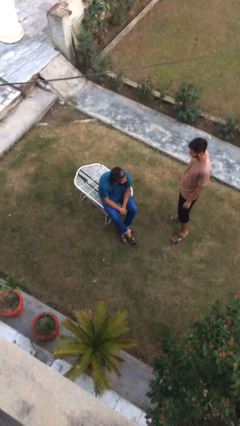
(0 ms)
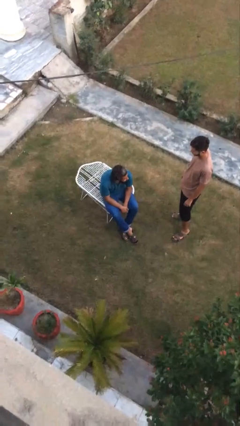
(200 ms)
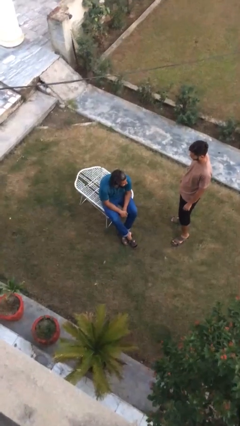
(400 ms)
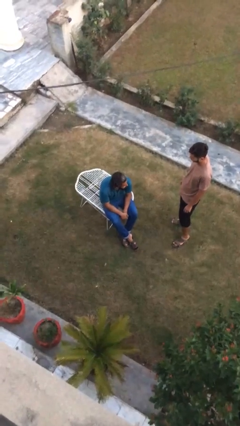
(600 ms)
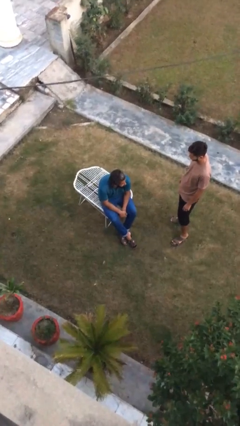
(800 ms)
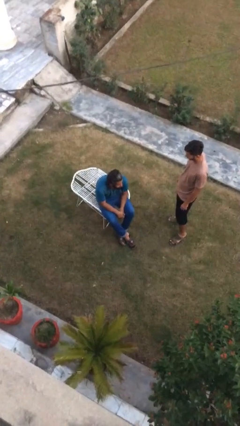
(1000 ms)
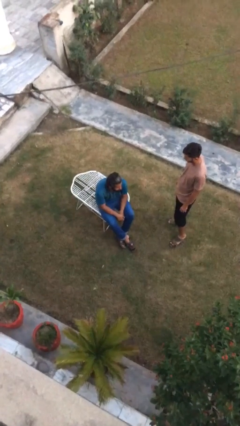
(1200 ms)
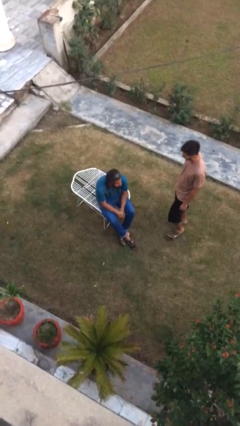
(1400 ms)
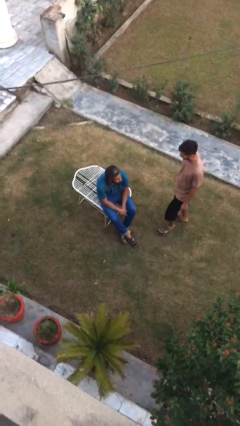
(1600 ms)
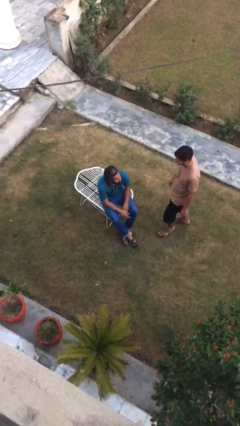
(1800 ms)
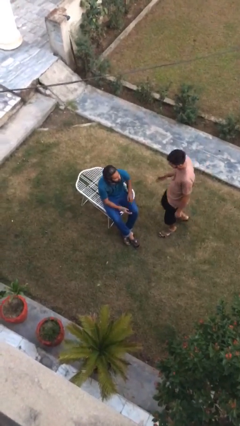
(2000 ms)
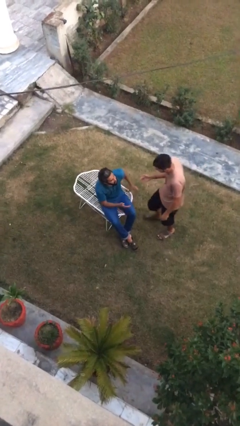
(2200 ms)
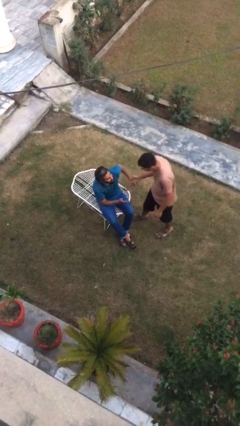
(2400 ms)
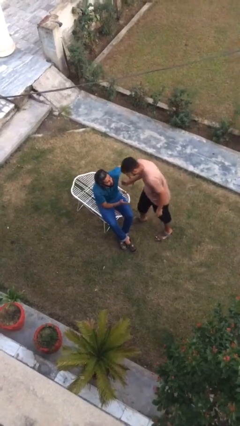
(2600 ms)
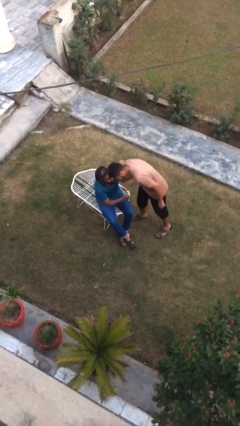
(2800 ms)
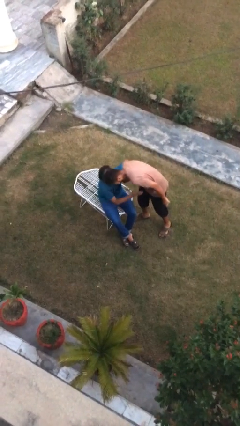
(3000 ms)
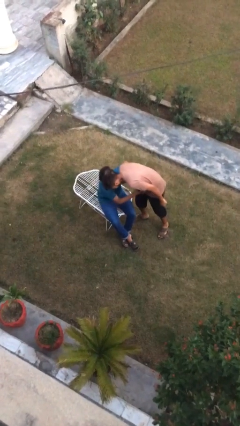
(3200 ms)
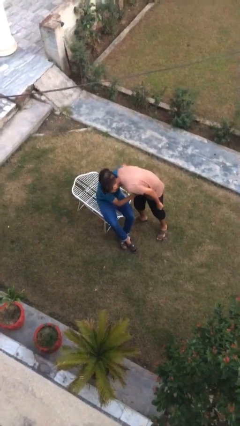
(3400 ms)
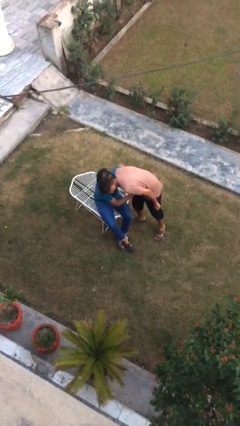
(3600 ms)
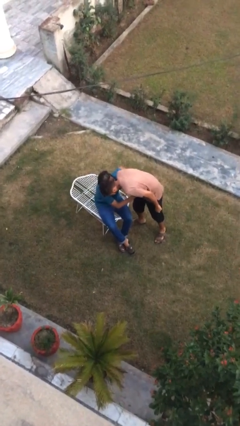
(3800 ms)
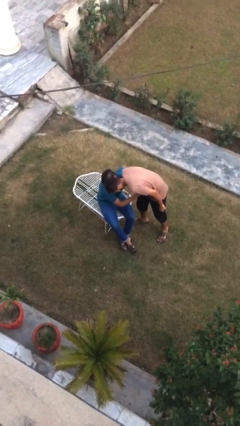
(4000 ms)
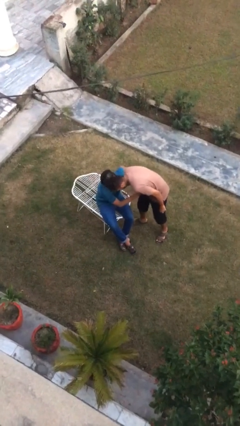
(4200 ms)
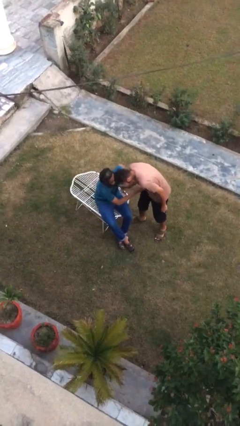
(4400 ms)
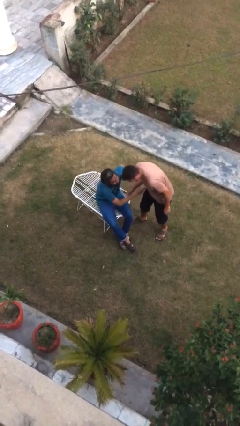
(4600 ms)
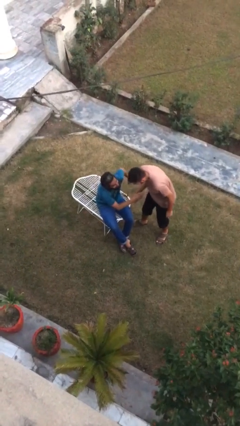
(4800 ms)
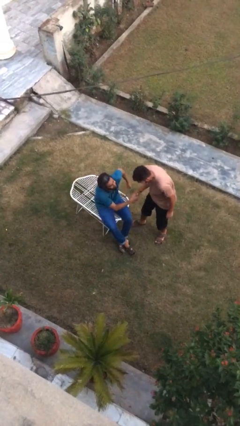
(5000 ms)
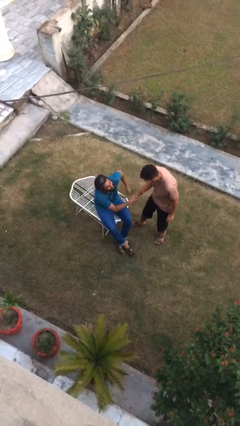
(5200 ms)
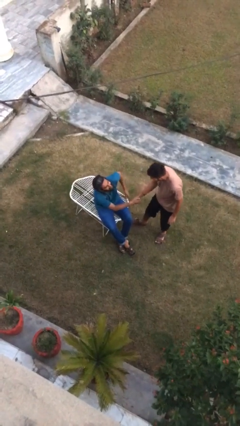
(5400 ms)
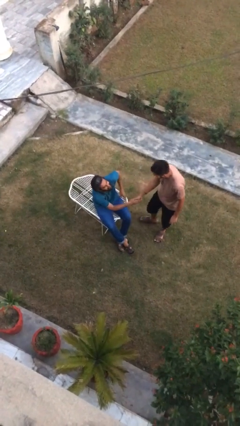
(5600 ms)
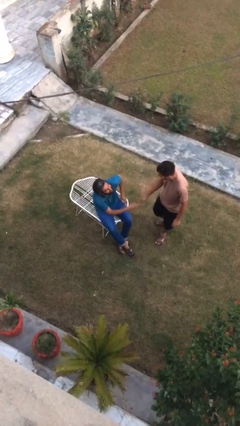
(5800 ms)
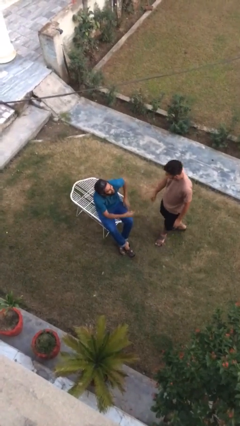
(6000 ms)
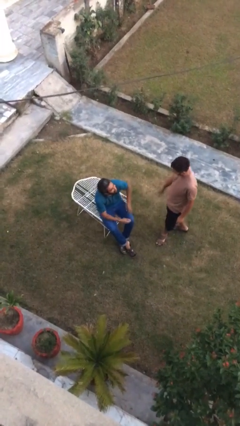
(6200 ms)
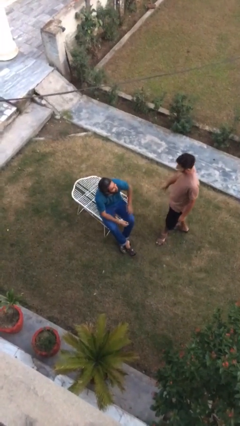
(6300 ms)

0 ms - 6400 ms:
person embraces person

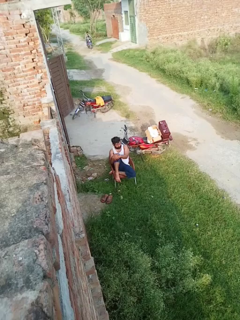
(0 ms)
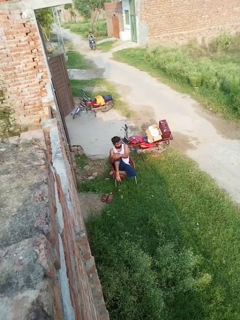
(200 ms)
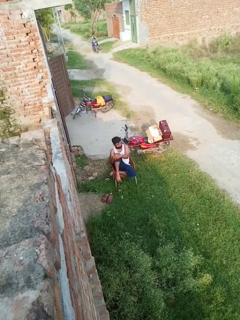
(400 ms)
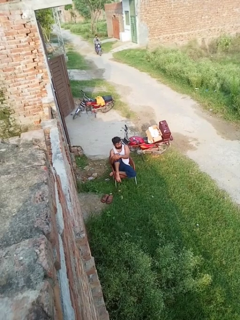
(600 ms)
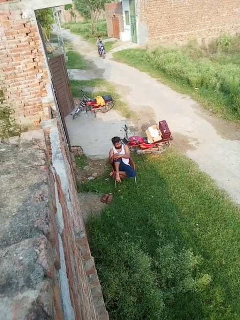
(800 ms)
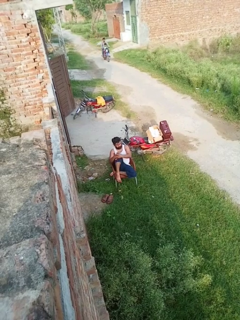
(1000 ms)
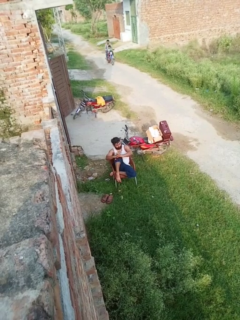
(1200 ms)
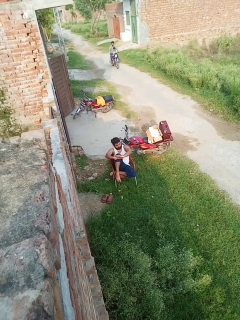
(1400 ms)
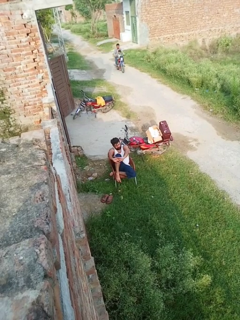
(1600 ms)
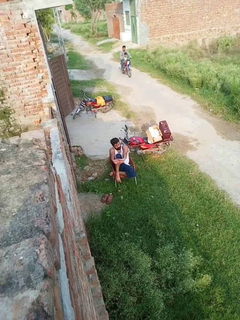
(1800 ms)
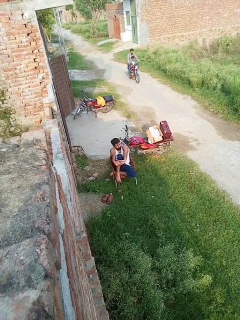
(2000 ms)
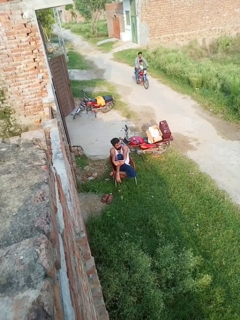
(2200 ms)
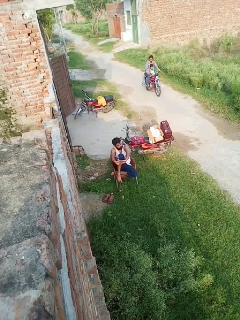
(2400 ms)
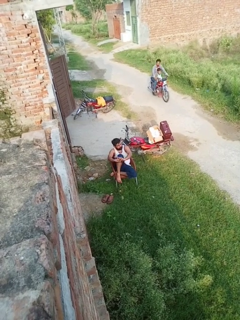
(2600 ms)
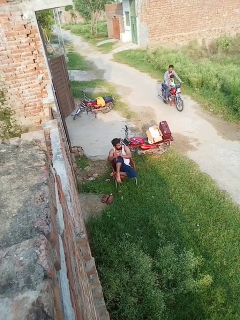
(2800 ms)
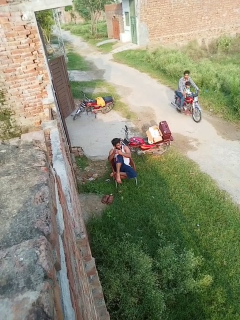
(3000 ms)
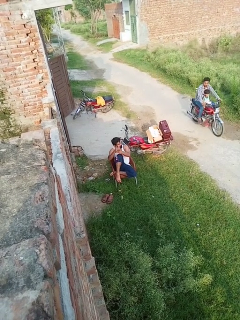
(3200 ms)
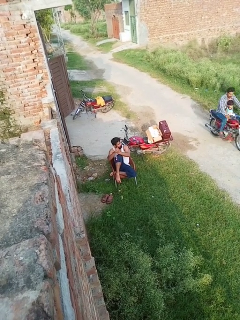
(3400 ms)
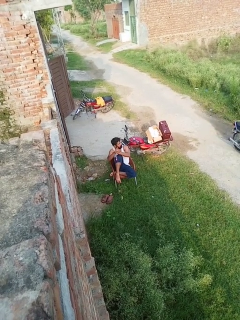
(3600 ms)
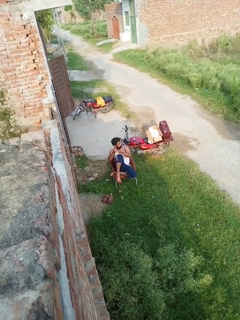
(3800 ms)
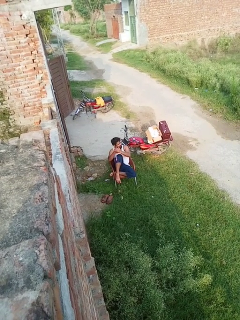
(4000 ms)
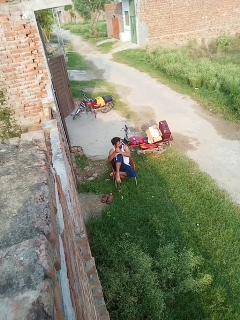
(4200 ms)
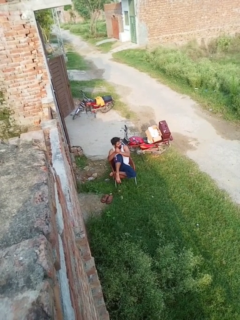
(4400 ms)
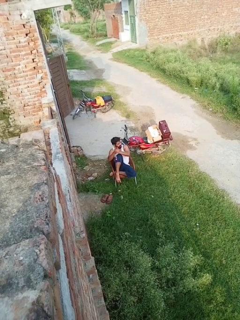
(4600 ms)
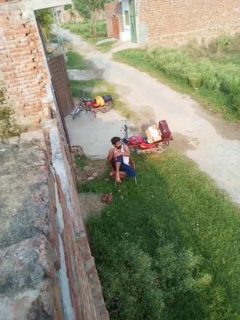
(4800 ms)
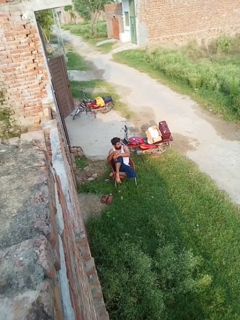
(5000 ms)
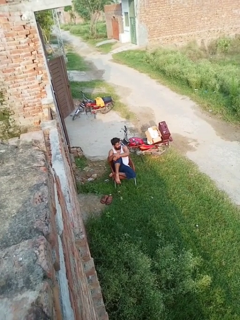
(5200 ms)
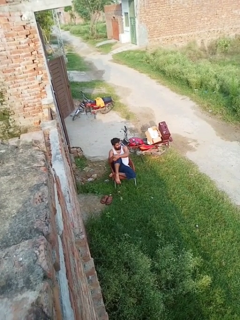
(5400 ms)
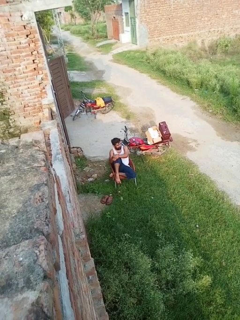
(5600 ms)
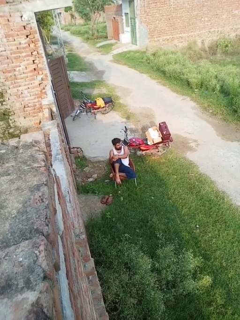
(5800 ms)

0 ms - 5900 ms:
person cracks knuckles

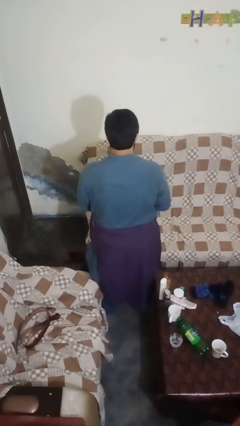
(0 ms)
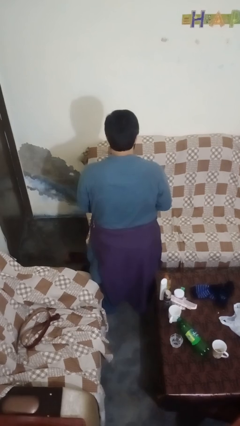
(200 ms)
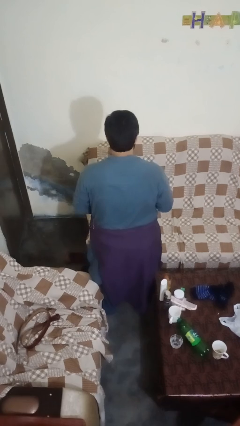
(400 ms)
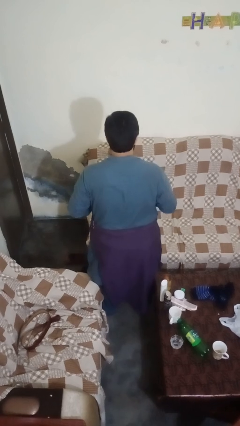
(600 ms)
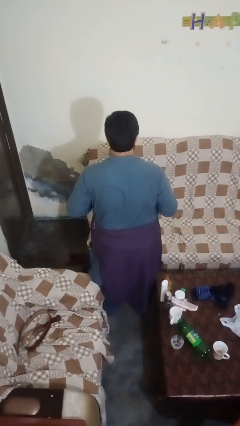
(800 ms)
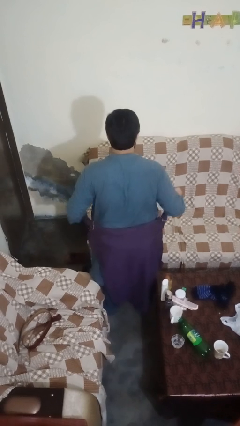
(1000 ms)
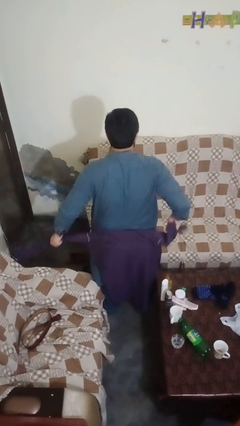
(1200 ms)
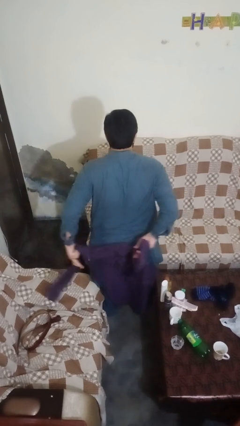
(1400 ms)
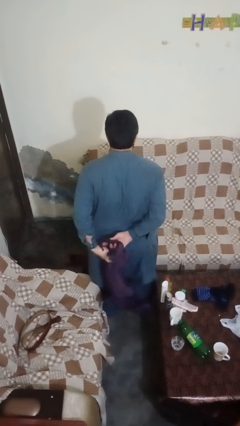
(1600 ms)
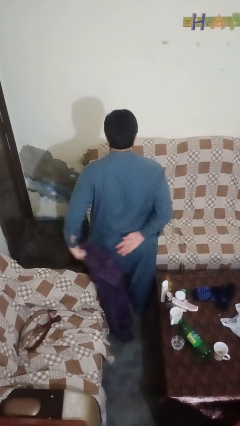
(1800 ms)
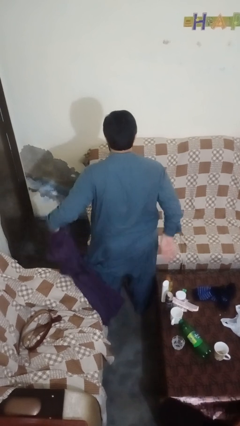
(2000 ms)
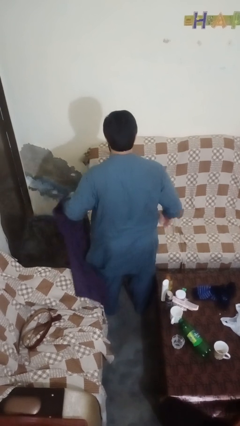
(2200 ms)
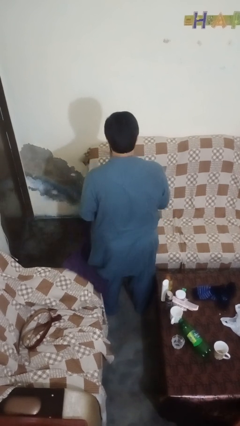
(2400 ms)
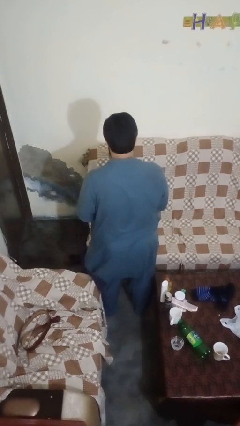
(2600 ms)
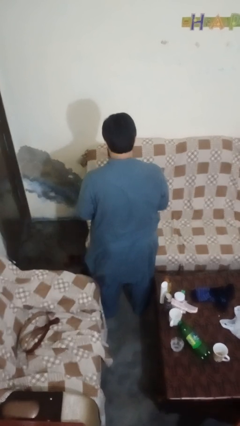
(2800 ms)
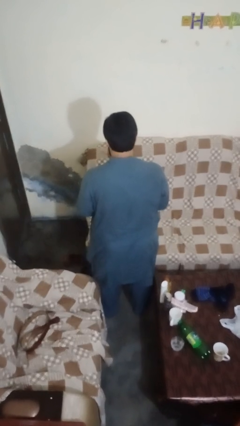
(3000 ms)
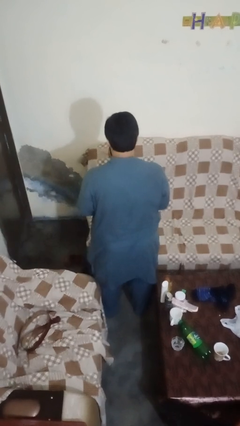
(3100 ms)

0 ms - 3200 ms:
person unties jacket around waist

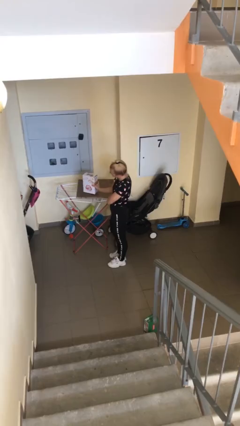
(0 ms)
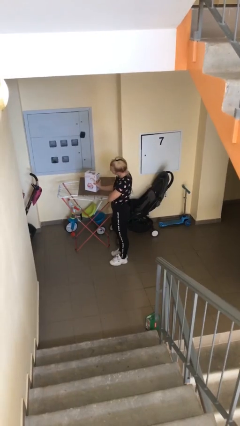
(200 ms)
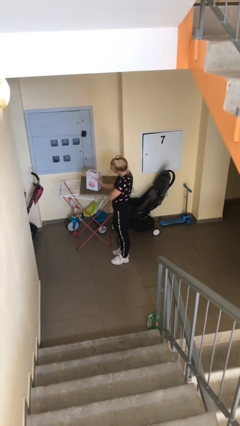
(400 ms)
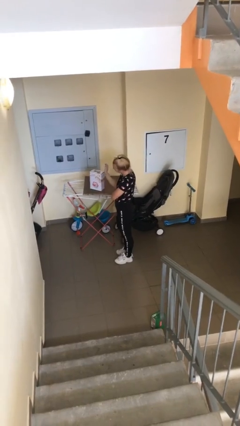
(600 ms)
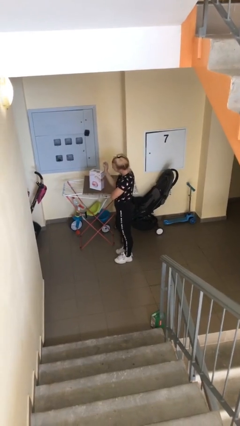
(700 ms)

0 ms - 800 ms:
person puts down object on table

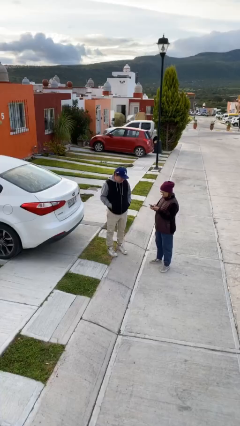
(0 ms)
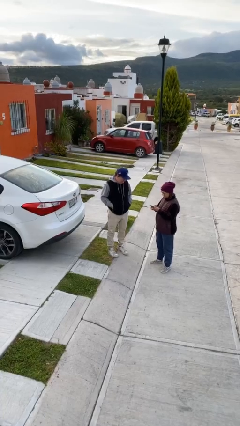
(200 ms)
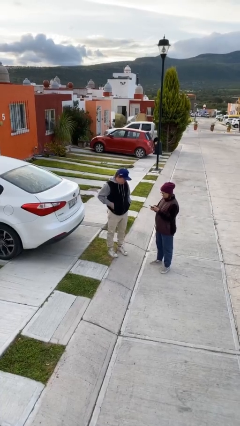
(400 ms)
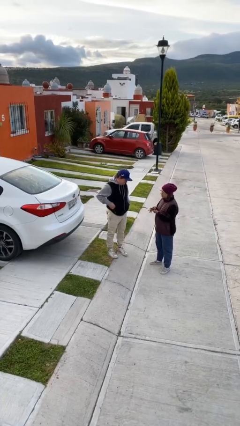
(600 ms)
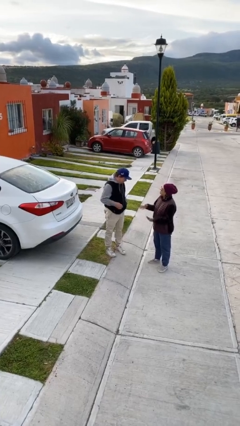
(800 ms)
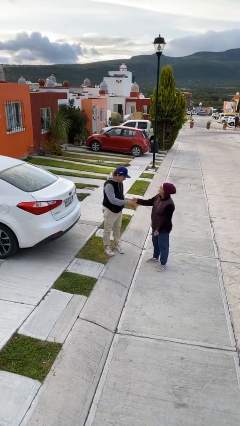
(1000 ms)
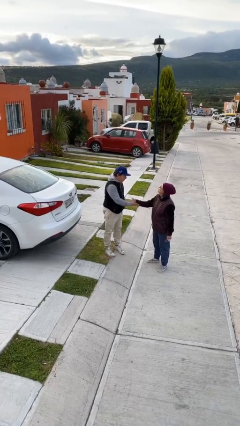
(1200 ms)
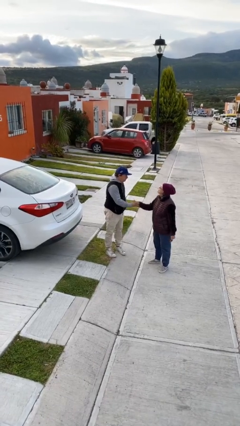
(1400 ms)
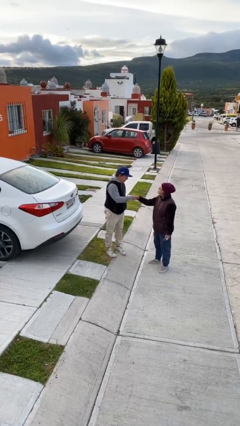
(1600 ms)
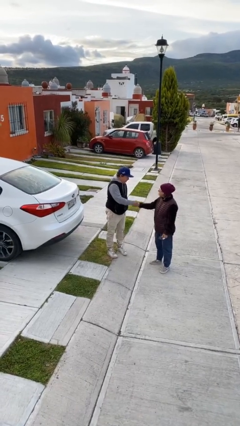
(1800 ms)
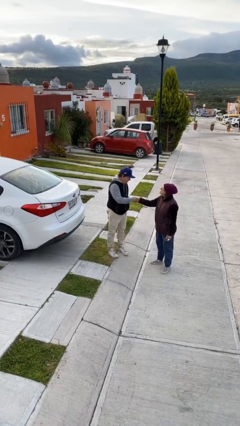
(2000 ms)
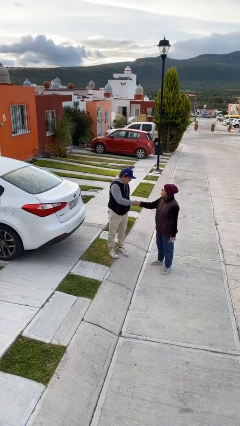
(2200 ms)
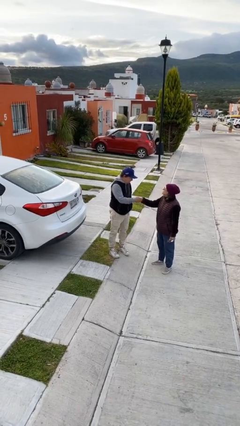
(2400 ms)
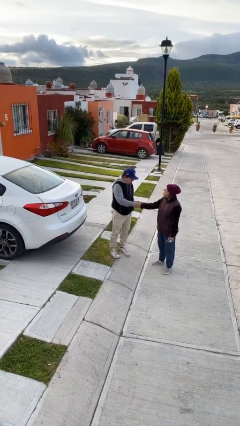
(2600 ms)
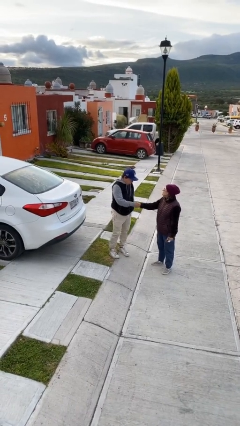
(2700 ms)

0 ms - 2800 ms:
person shakes hand

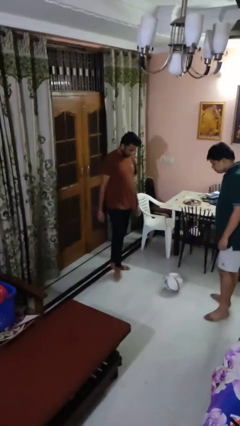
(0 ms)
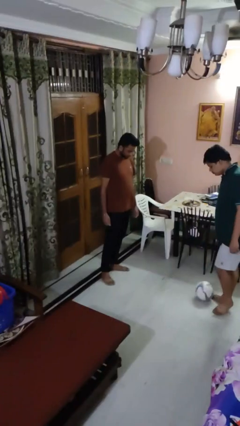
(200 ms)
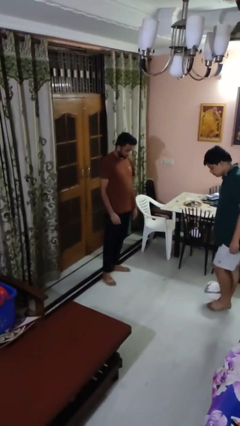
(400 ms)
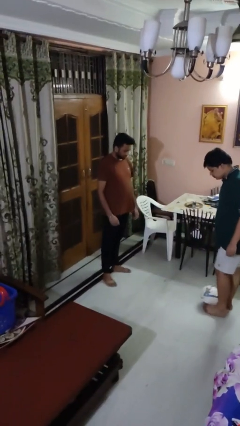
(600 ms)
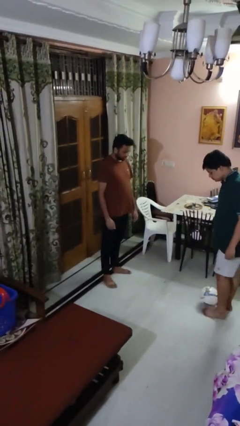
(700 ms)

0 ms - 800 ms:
person kicks object to person
